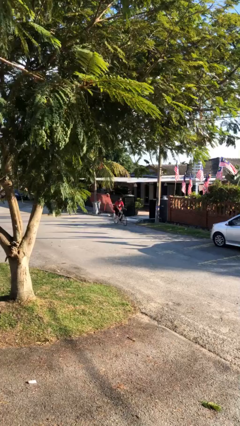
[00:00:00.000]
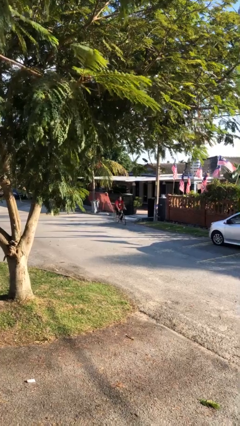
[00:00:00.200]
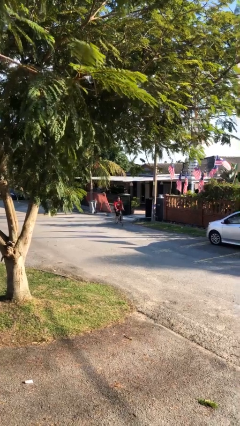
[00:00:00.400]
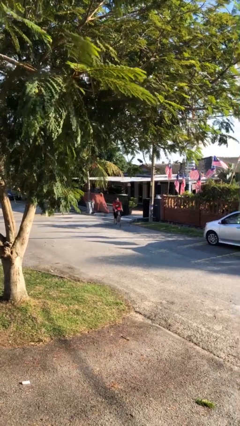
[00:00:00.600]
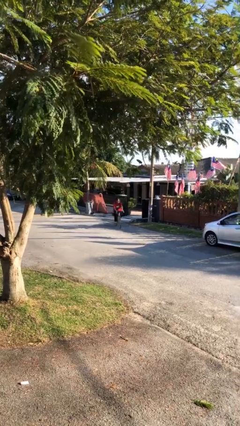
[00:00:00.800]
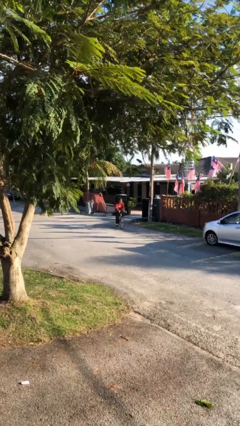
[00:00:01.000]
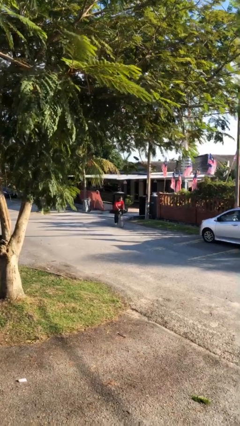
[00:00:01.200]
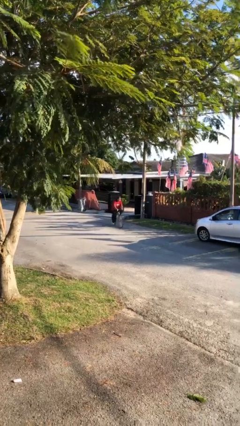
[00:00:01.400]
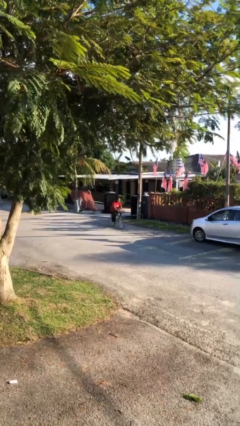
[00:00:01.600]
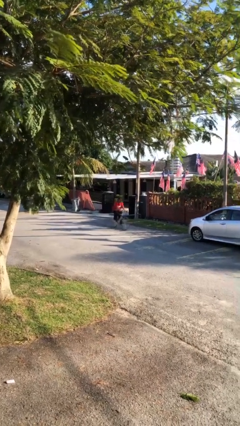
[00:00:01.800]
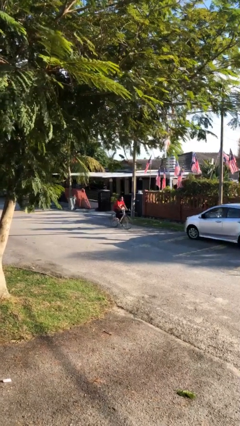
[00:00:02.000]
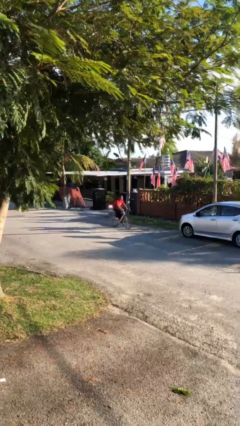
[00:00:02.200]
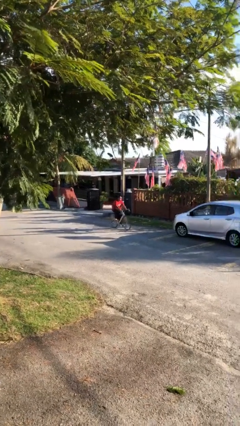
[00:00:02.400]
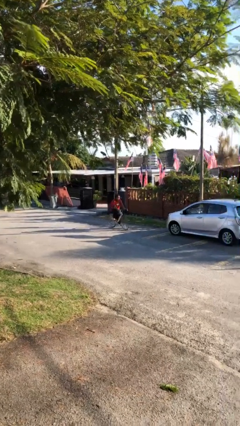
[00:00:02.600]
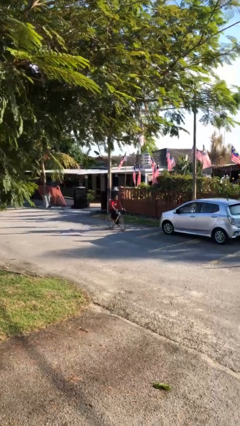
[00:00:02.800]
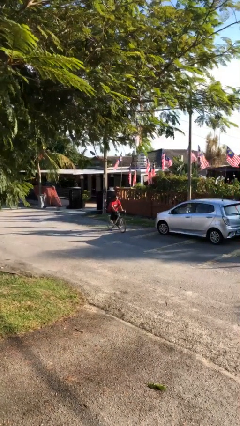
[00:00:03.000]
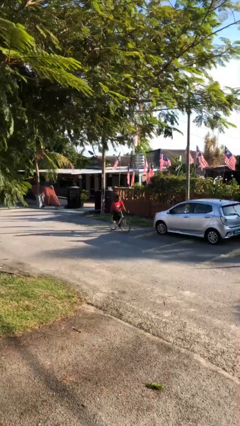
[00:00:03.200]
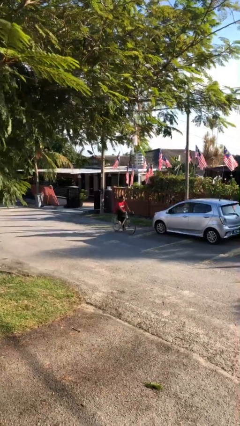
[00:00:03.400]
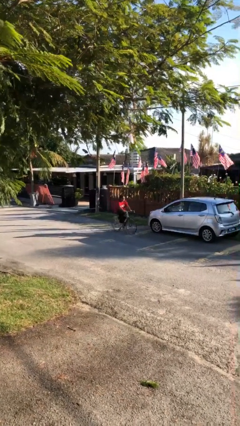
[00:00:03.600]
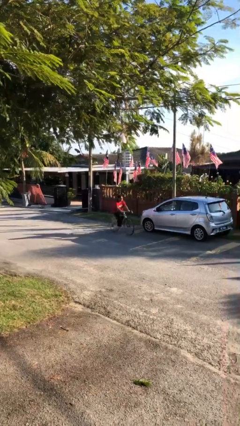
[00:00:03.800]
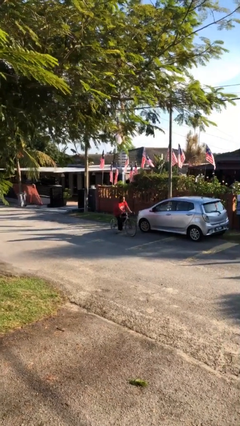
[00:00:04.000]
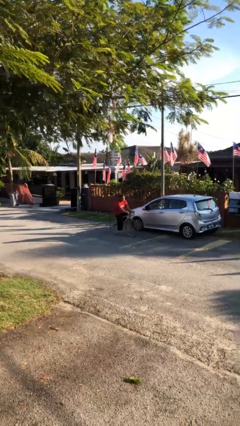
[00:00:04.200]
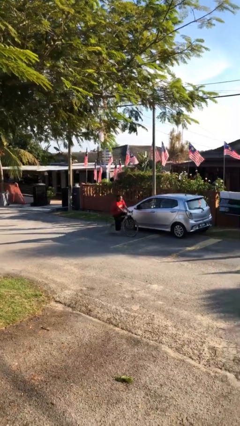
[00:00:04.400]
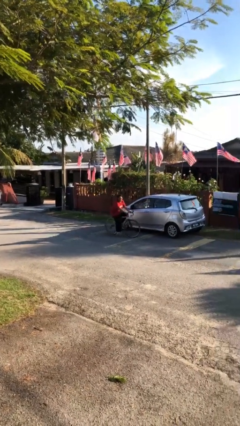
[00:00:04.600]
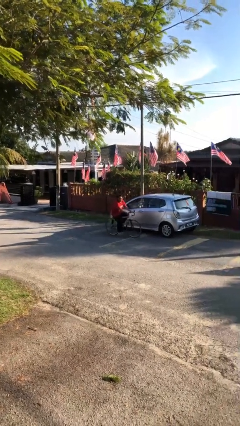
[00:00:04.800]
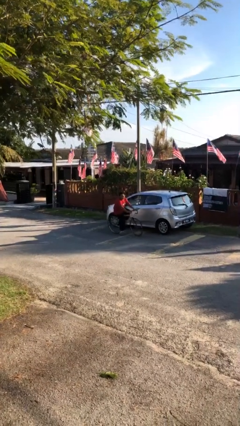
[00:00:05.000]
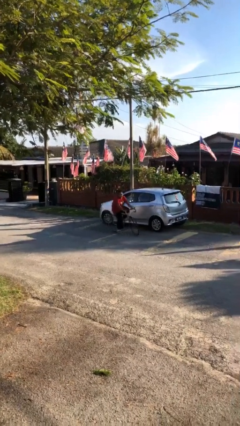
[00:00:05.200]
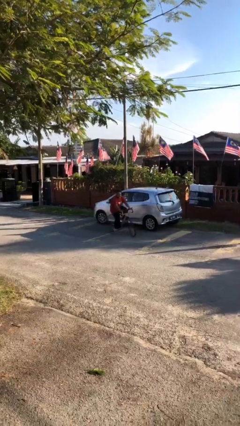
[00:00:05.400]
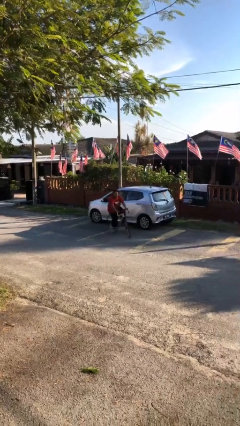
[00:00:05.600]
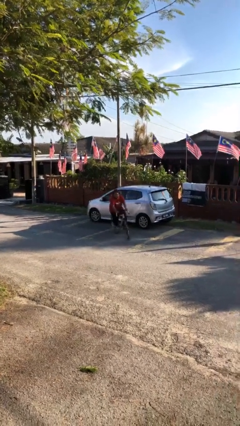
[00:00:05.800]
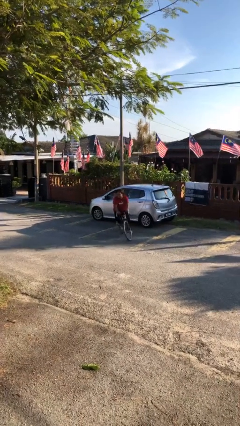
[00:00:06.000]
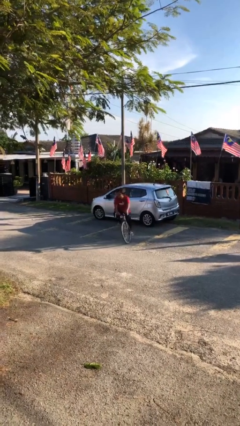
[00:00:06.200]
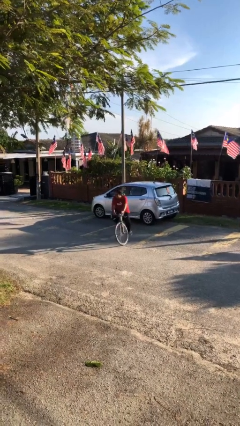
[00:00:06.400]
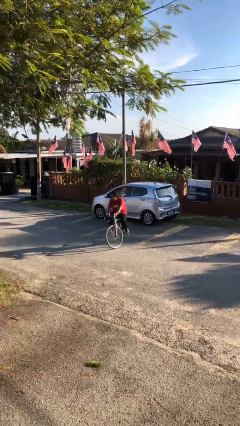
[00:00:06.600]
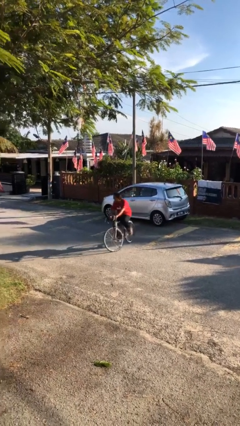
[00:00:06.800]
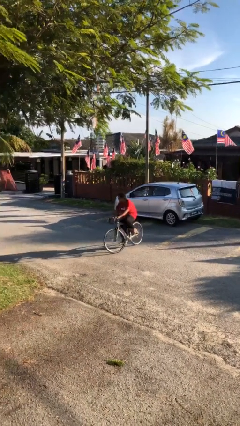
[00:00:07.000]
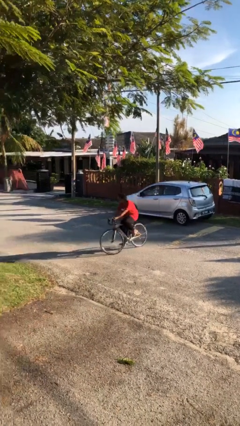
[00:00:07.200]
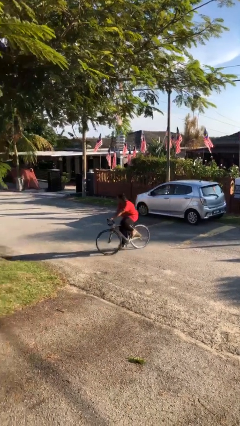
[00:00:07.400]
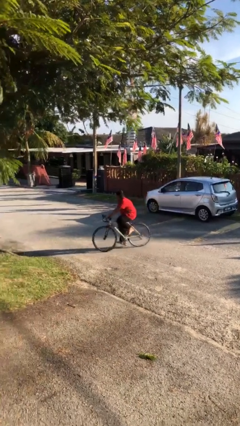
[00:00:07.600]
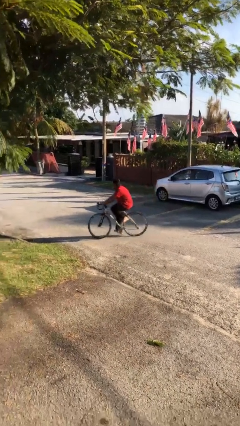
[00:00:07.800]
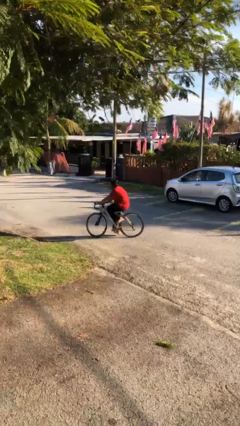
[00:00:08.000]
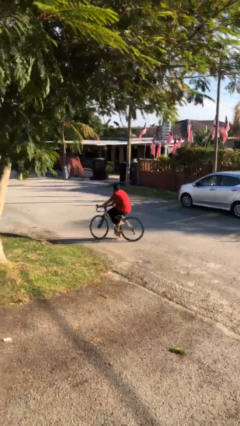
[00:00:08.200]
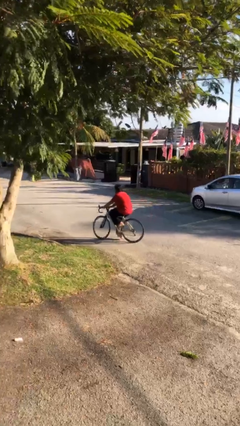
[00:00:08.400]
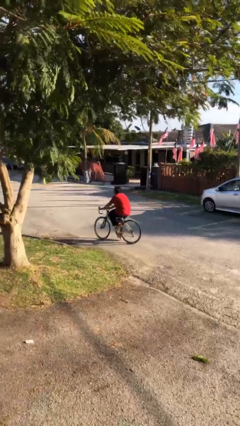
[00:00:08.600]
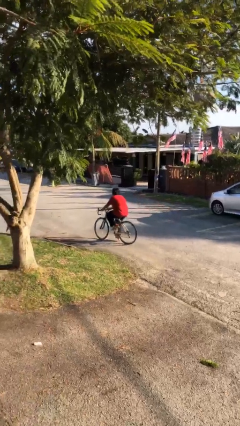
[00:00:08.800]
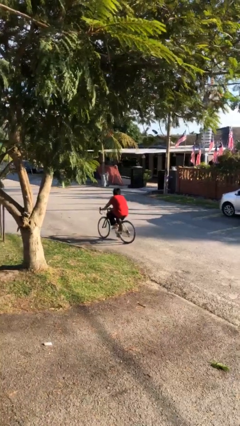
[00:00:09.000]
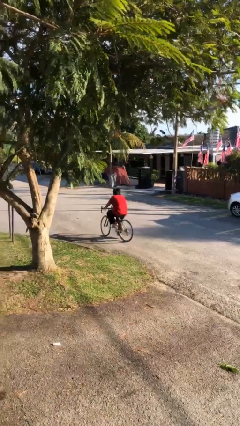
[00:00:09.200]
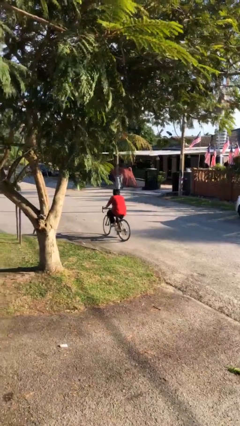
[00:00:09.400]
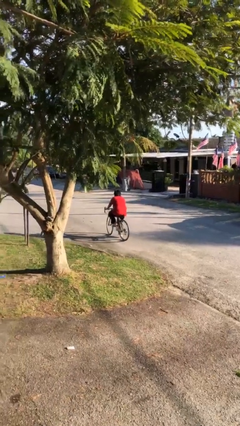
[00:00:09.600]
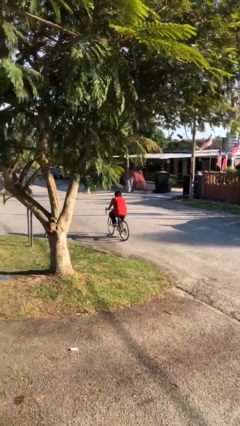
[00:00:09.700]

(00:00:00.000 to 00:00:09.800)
person rides bicycle

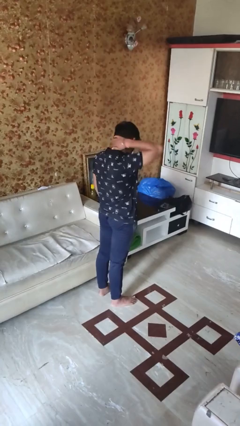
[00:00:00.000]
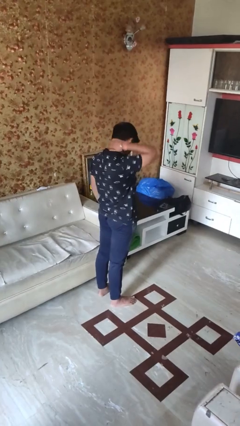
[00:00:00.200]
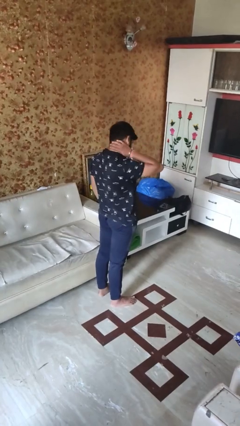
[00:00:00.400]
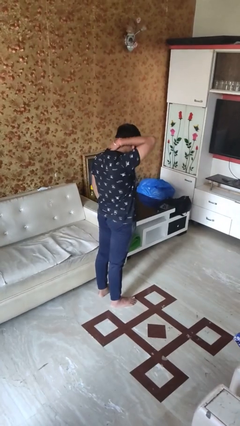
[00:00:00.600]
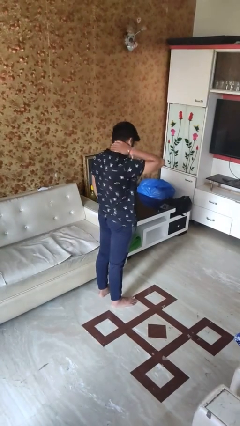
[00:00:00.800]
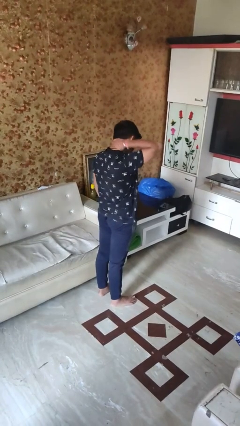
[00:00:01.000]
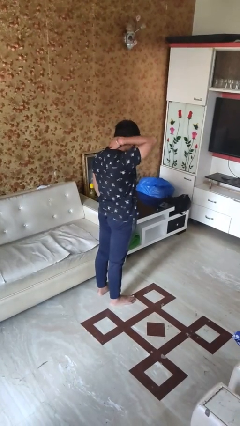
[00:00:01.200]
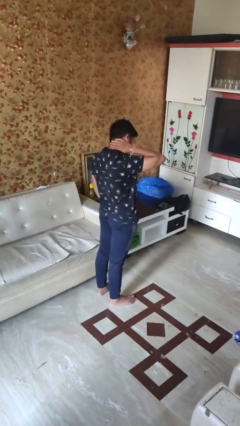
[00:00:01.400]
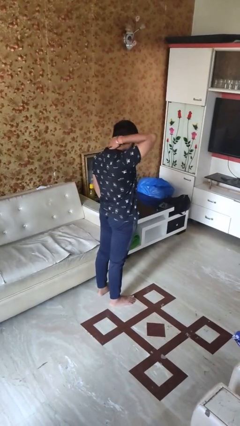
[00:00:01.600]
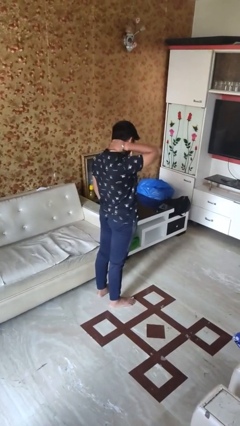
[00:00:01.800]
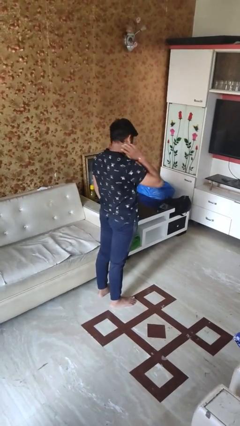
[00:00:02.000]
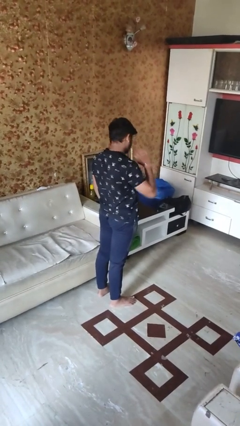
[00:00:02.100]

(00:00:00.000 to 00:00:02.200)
person rubs neck

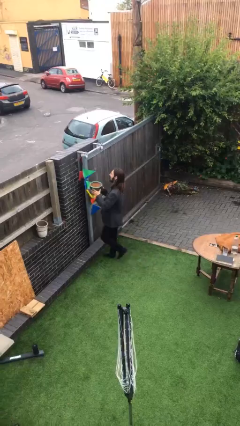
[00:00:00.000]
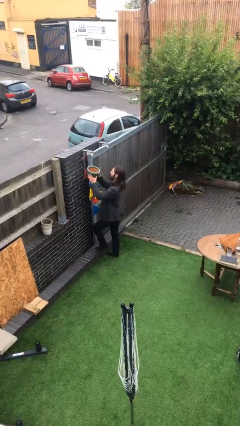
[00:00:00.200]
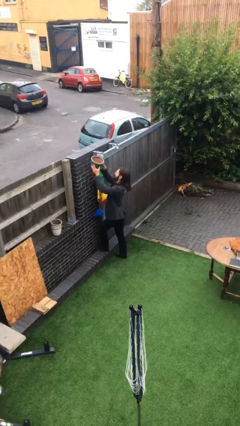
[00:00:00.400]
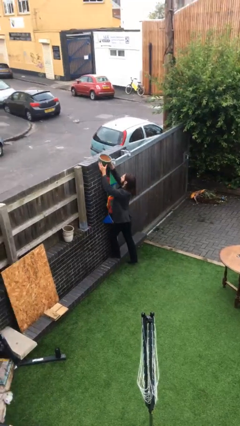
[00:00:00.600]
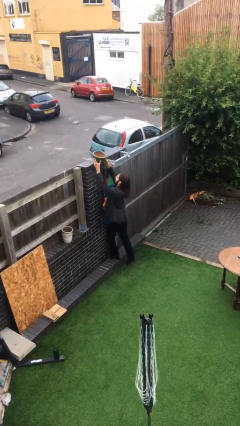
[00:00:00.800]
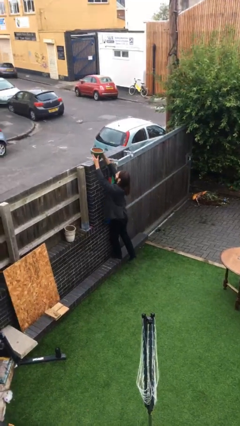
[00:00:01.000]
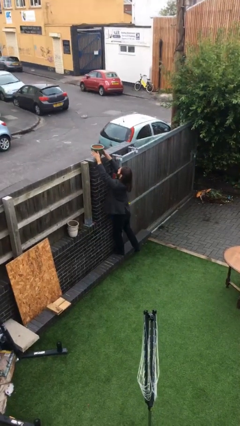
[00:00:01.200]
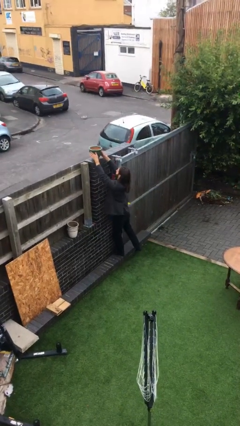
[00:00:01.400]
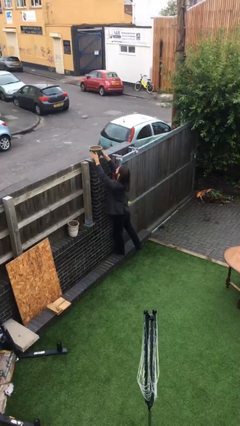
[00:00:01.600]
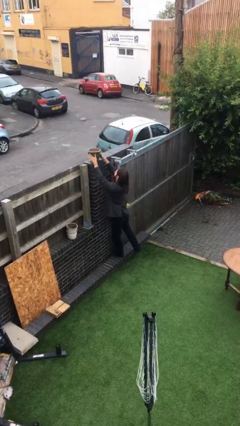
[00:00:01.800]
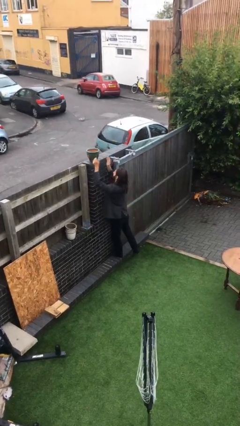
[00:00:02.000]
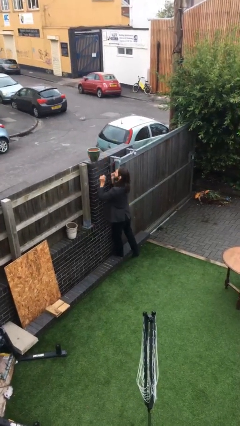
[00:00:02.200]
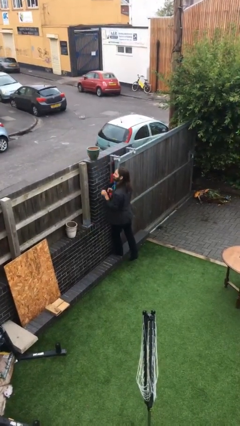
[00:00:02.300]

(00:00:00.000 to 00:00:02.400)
person puts down object on shelf

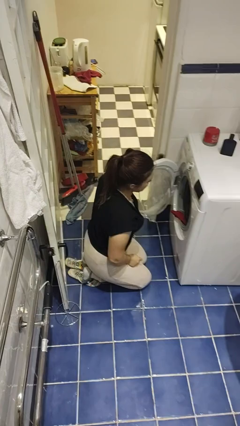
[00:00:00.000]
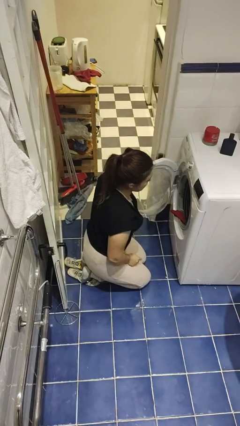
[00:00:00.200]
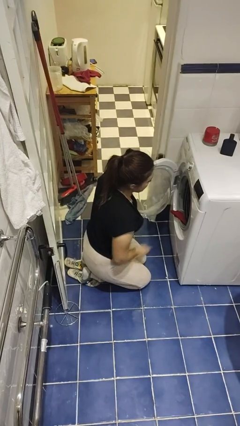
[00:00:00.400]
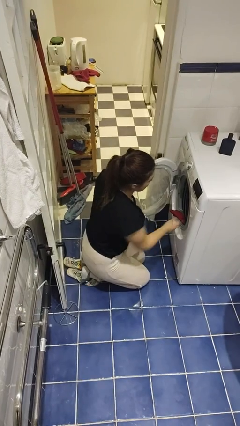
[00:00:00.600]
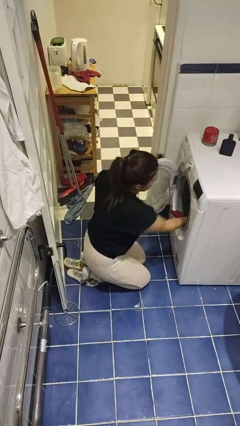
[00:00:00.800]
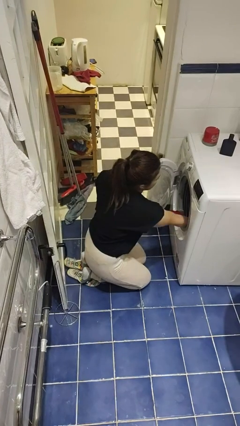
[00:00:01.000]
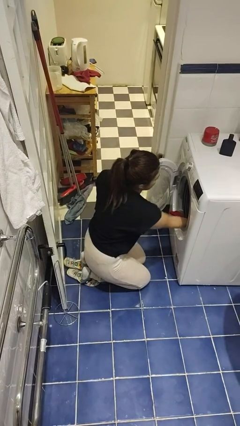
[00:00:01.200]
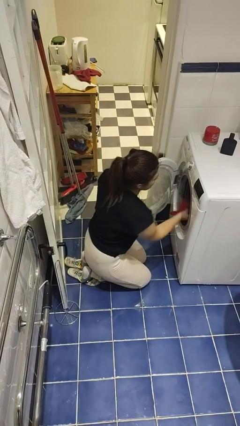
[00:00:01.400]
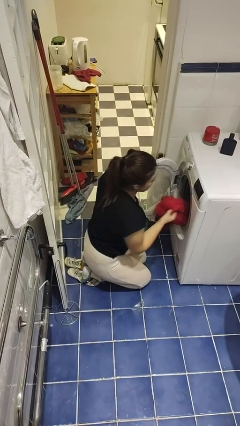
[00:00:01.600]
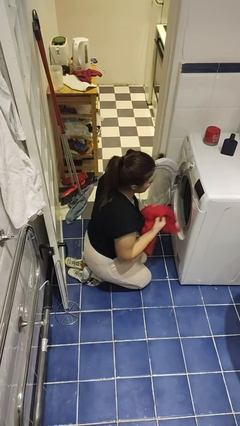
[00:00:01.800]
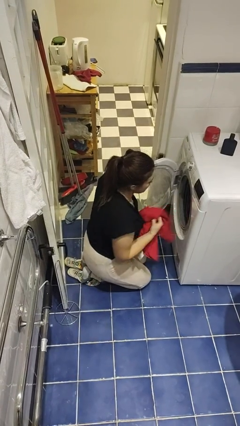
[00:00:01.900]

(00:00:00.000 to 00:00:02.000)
person unloads dryer

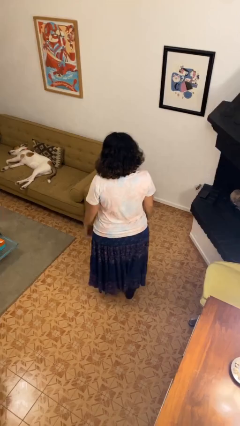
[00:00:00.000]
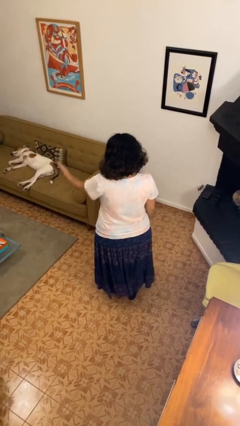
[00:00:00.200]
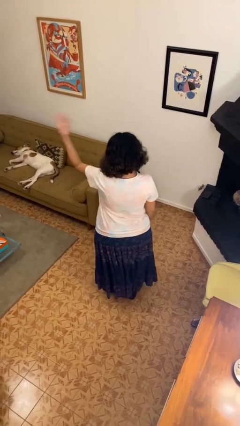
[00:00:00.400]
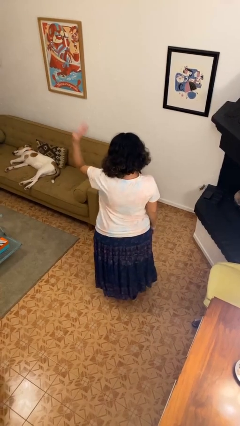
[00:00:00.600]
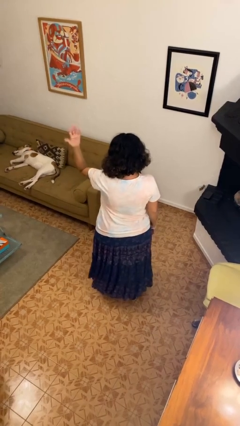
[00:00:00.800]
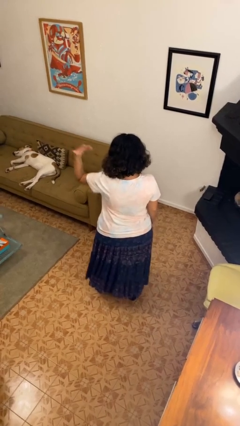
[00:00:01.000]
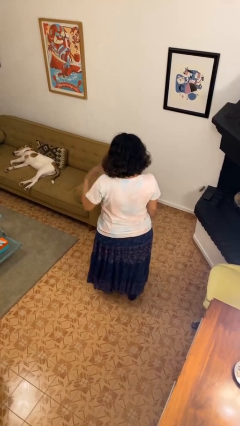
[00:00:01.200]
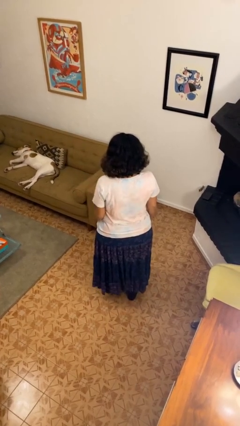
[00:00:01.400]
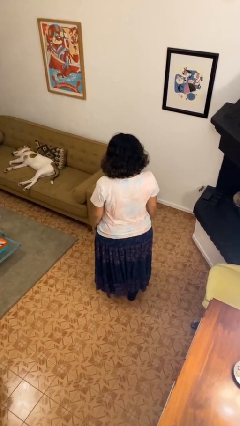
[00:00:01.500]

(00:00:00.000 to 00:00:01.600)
person gestures come here
